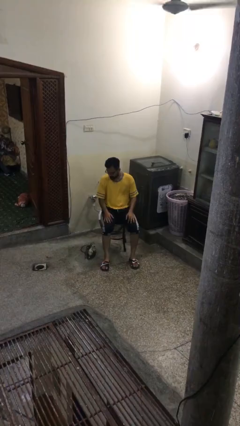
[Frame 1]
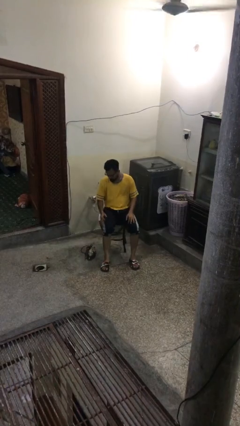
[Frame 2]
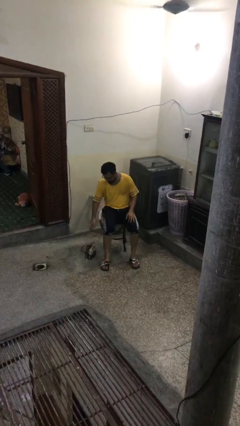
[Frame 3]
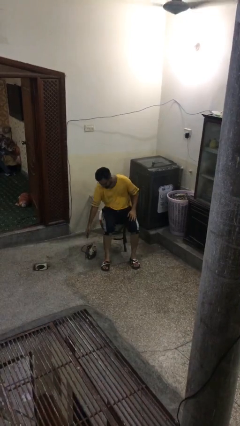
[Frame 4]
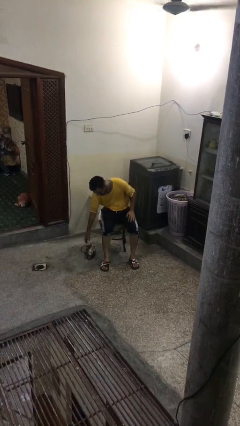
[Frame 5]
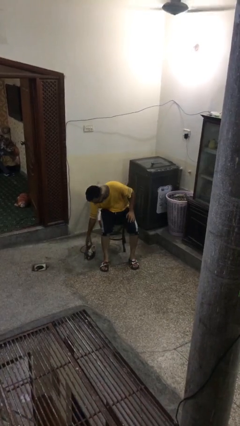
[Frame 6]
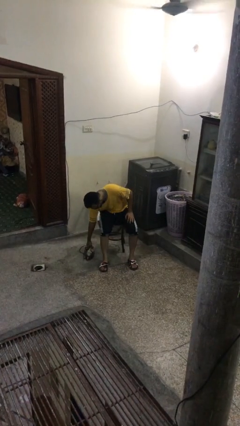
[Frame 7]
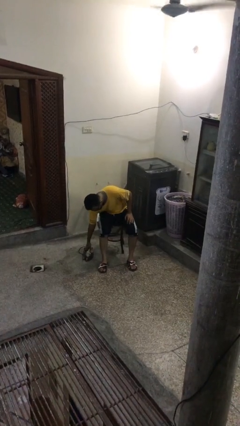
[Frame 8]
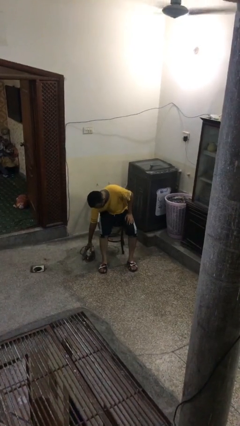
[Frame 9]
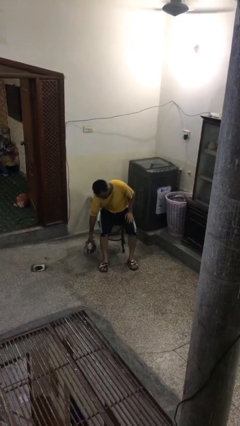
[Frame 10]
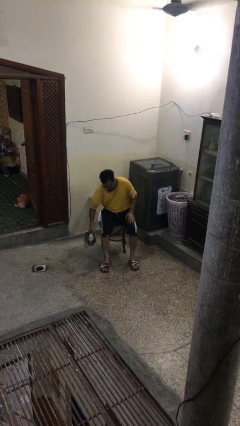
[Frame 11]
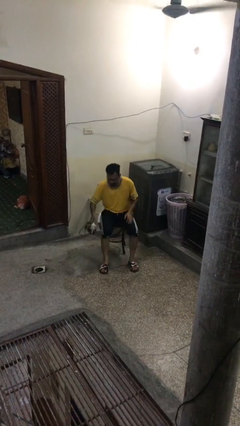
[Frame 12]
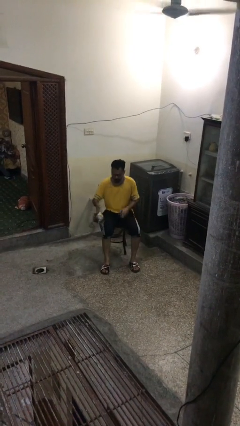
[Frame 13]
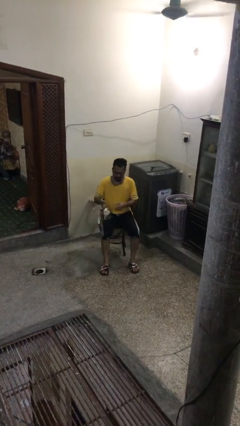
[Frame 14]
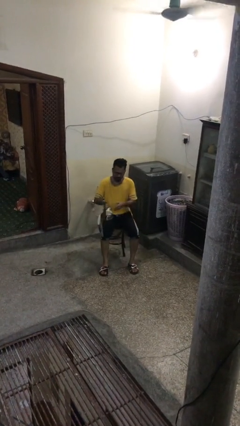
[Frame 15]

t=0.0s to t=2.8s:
person picks up object from floor

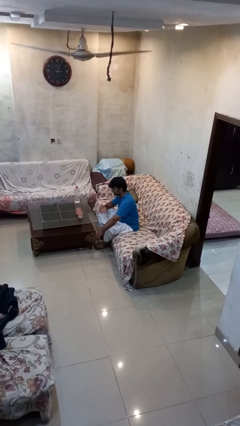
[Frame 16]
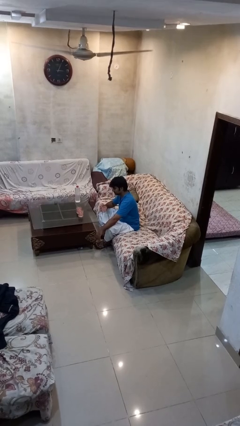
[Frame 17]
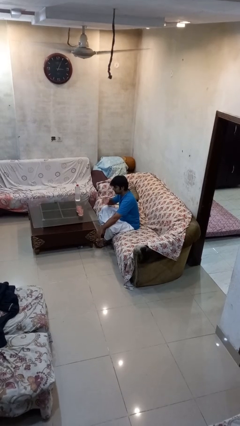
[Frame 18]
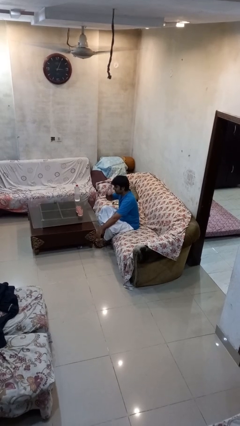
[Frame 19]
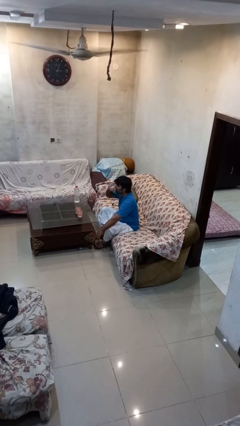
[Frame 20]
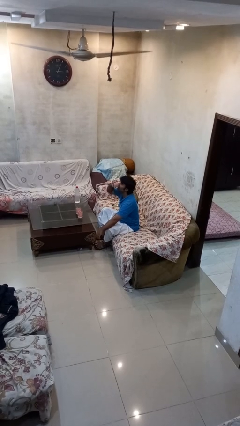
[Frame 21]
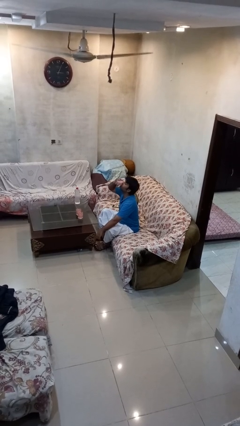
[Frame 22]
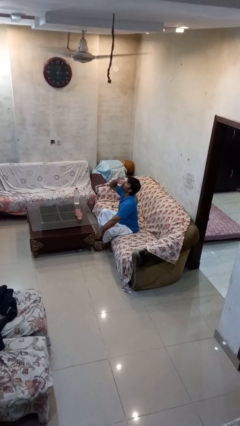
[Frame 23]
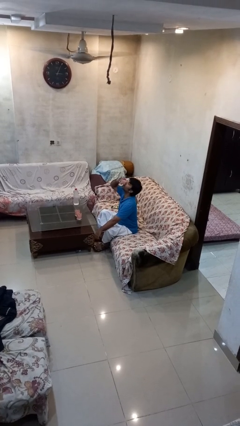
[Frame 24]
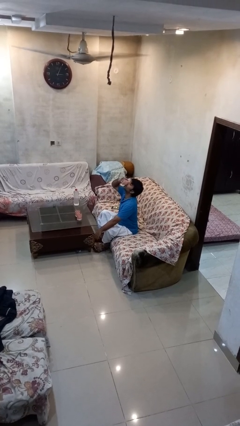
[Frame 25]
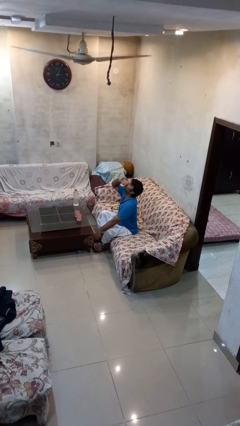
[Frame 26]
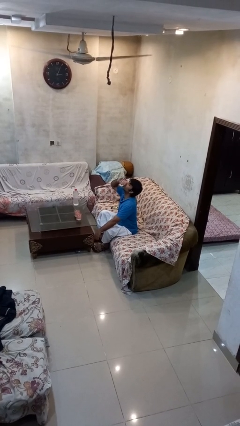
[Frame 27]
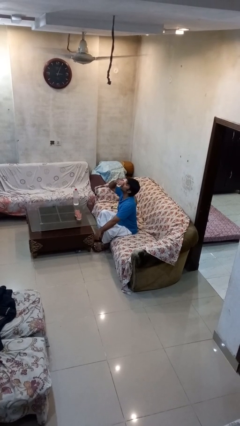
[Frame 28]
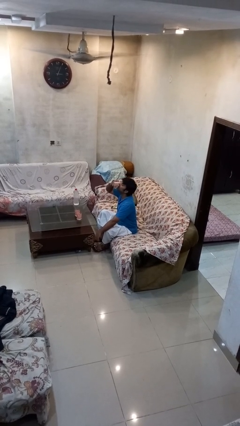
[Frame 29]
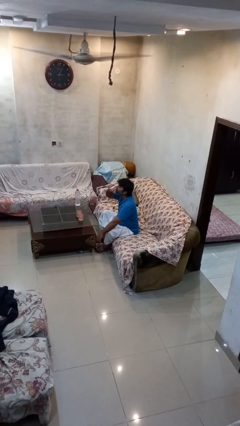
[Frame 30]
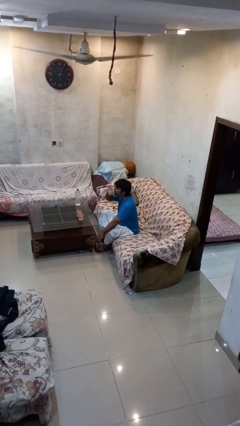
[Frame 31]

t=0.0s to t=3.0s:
person drinks from shotglass

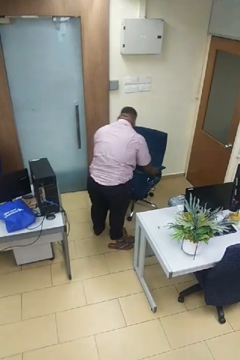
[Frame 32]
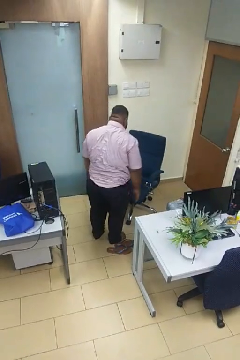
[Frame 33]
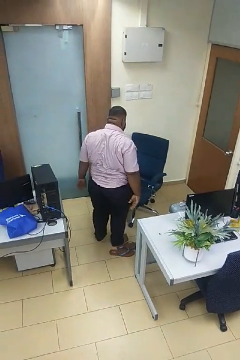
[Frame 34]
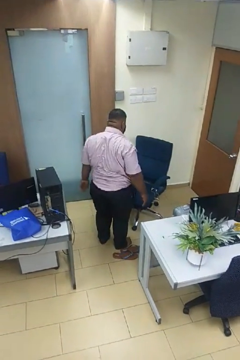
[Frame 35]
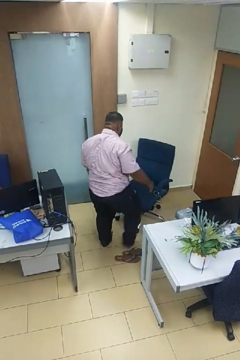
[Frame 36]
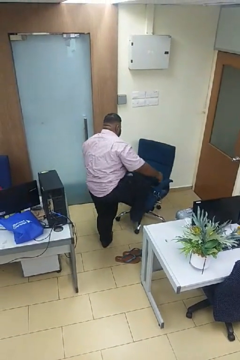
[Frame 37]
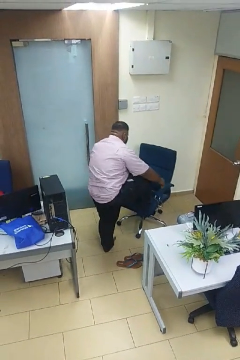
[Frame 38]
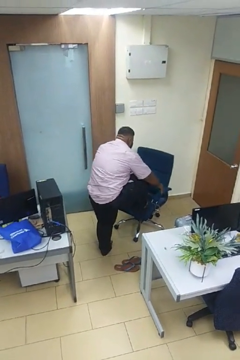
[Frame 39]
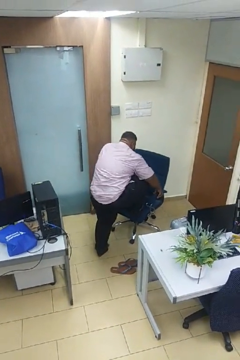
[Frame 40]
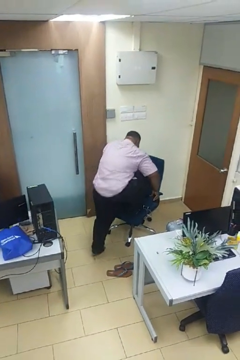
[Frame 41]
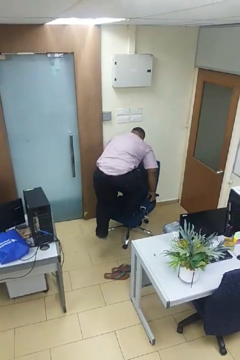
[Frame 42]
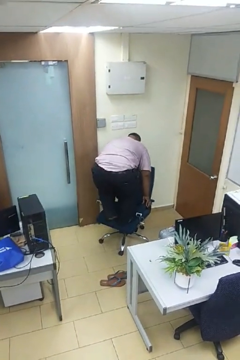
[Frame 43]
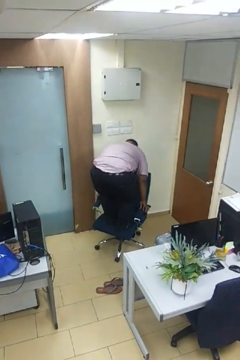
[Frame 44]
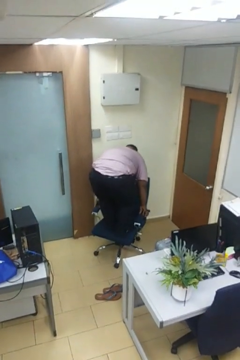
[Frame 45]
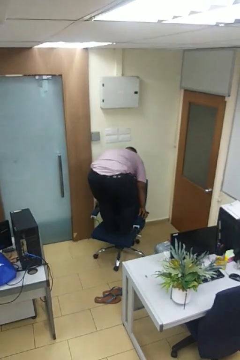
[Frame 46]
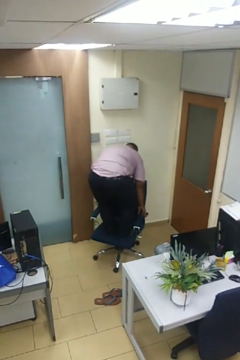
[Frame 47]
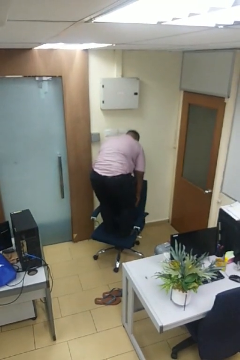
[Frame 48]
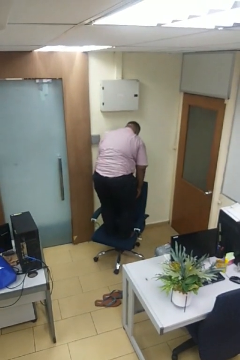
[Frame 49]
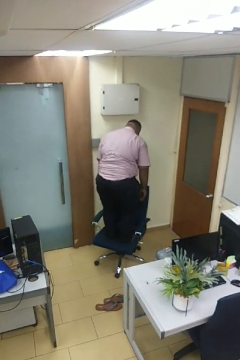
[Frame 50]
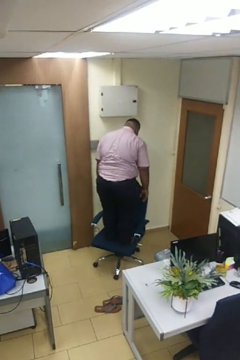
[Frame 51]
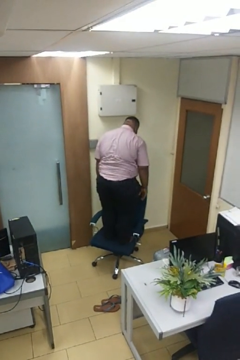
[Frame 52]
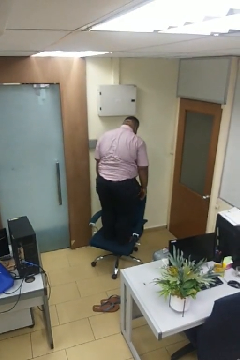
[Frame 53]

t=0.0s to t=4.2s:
person climbs on chair

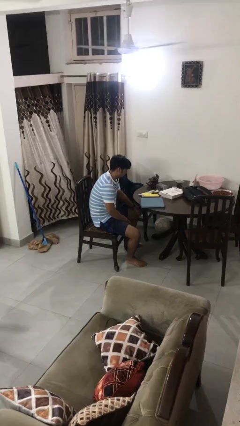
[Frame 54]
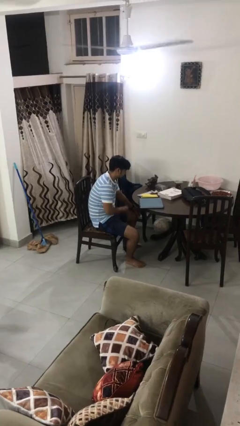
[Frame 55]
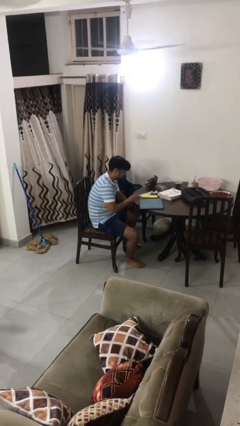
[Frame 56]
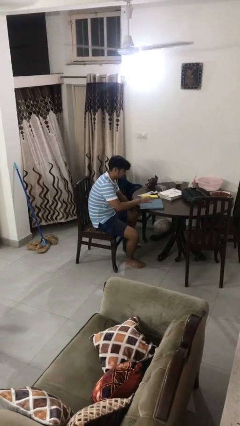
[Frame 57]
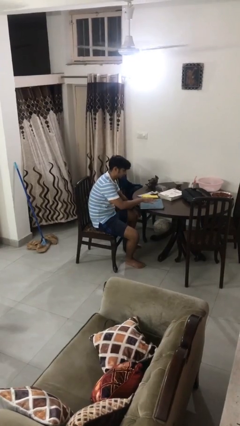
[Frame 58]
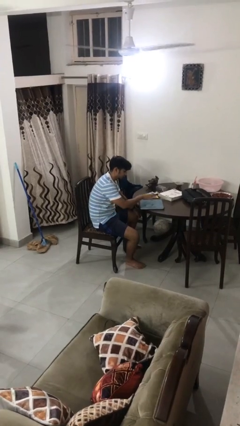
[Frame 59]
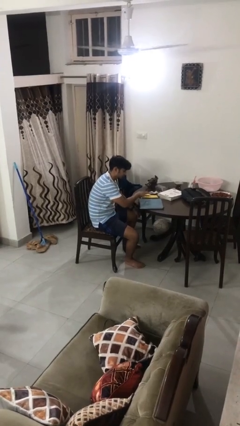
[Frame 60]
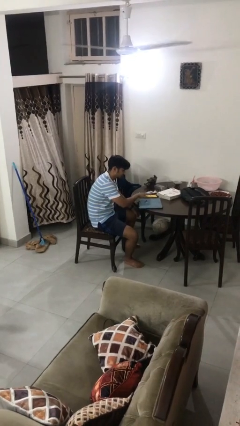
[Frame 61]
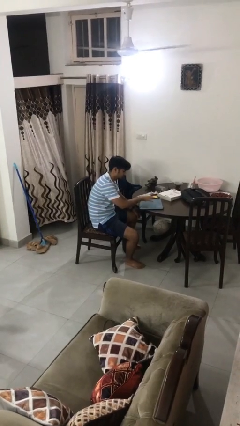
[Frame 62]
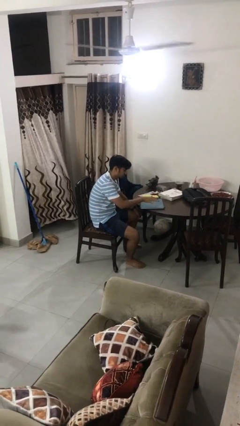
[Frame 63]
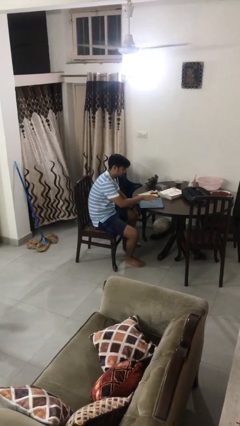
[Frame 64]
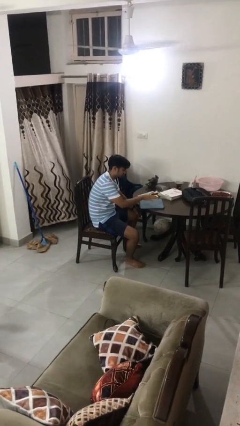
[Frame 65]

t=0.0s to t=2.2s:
person waves hand over object

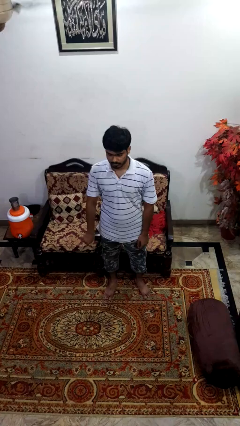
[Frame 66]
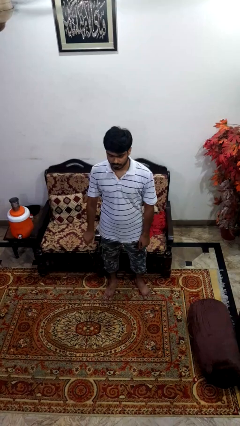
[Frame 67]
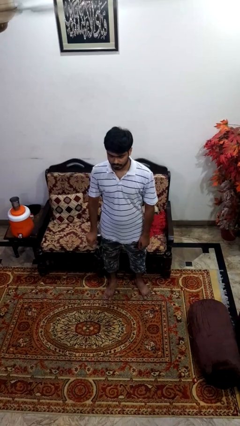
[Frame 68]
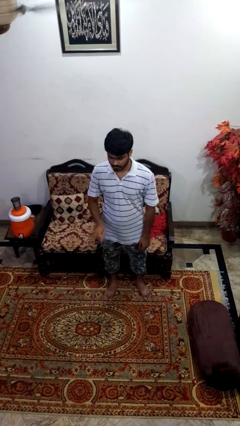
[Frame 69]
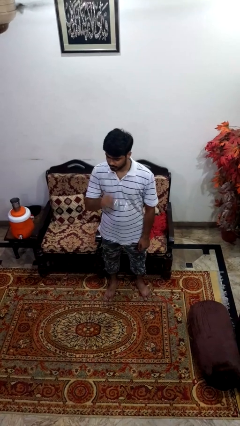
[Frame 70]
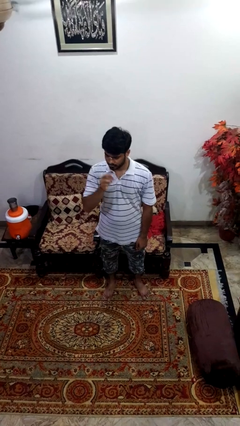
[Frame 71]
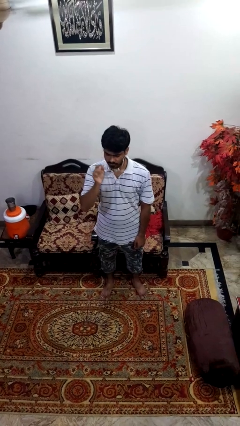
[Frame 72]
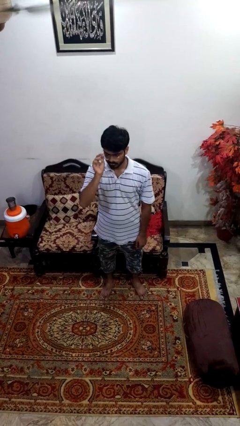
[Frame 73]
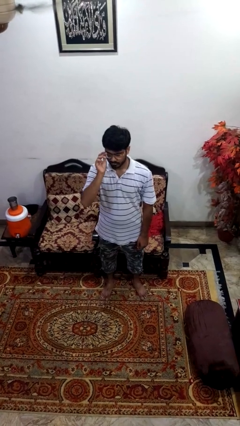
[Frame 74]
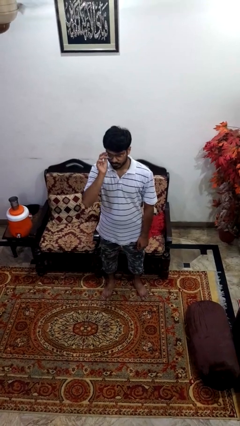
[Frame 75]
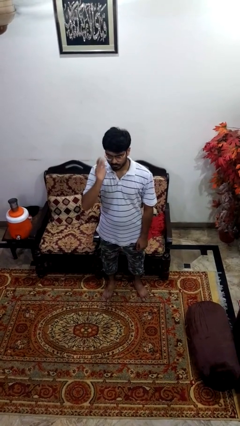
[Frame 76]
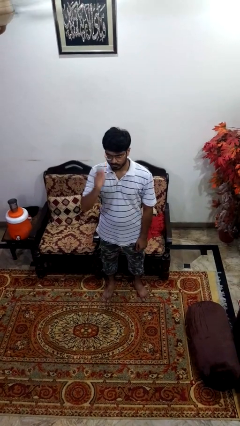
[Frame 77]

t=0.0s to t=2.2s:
person puts on glasses

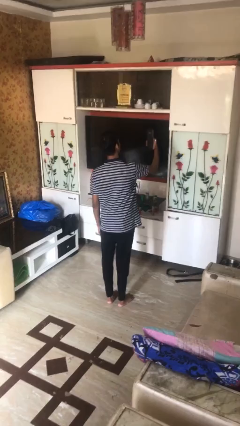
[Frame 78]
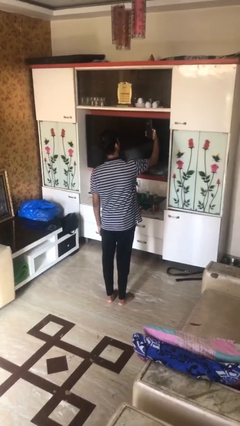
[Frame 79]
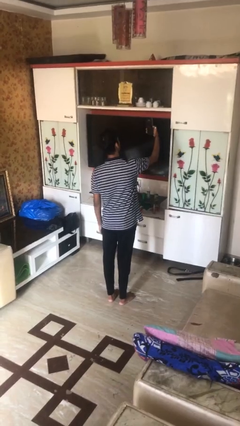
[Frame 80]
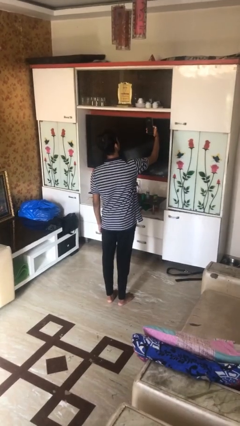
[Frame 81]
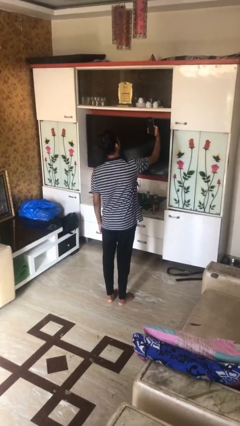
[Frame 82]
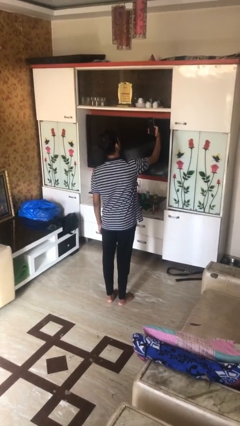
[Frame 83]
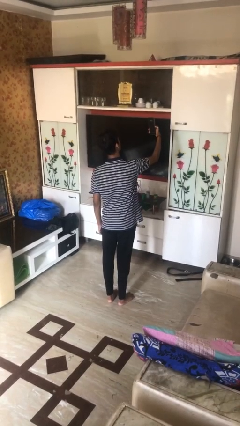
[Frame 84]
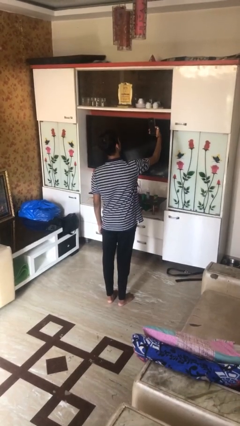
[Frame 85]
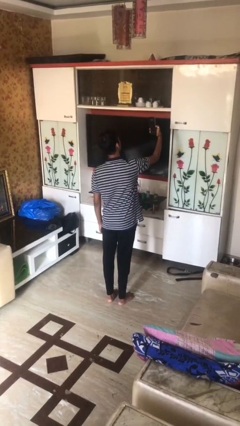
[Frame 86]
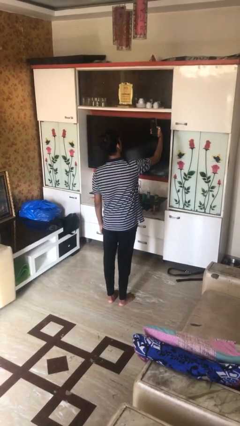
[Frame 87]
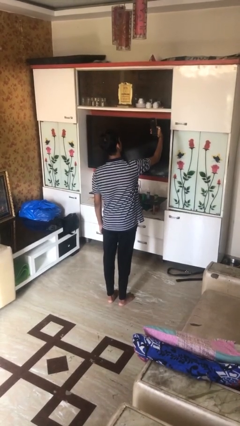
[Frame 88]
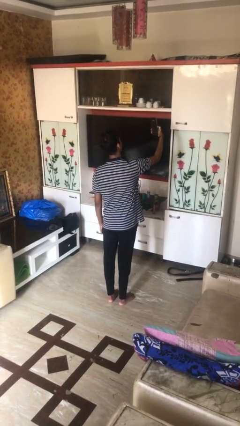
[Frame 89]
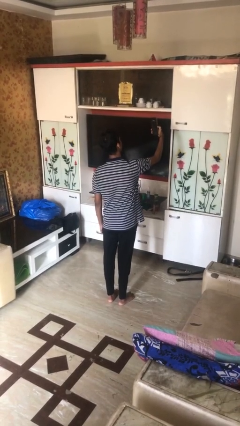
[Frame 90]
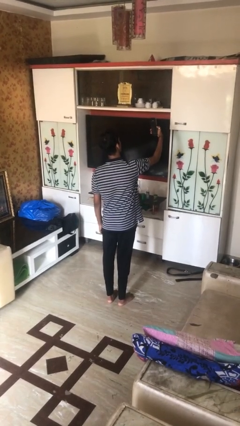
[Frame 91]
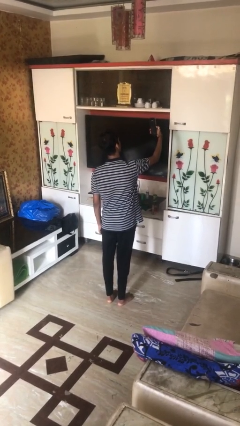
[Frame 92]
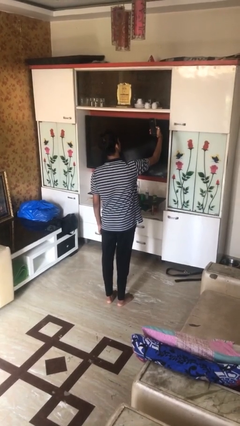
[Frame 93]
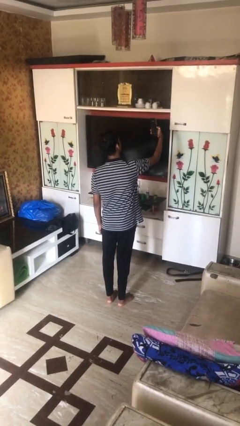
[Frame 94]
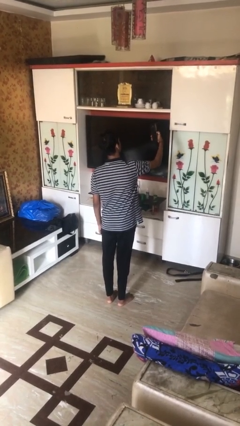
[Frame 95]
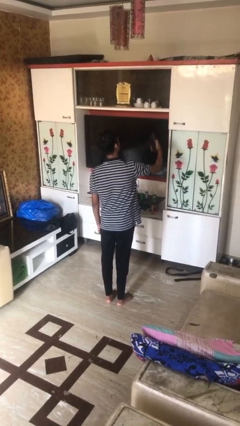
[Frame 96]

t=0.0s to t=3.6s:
person takes selfie
